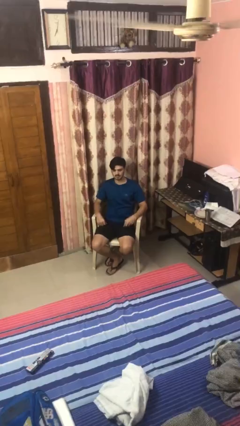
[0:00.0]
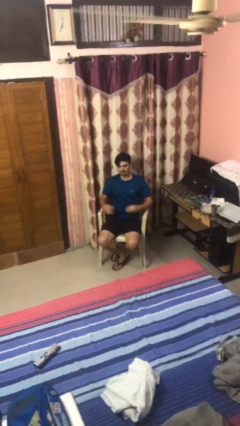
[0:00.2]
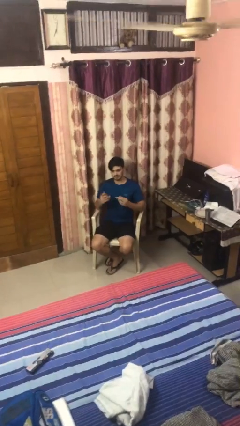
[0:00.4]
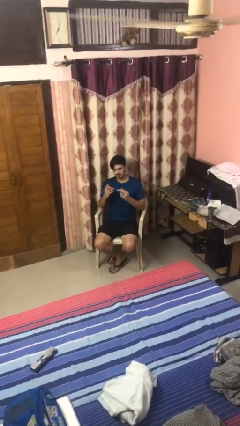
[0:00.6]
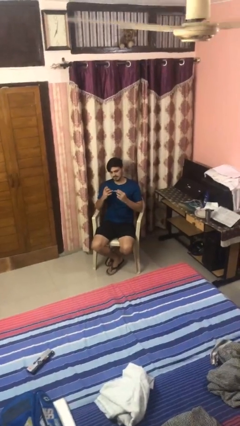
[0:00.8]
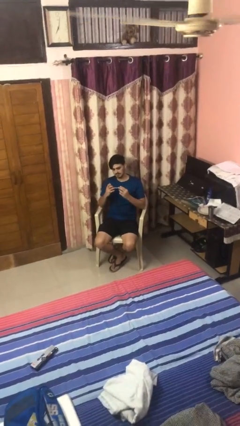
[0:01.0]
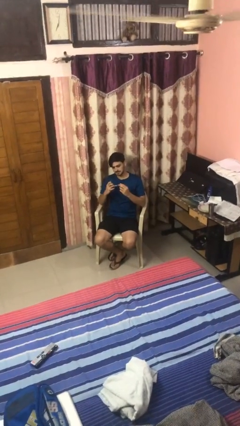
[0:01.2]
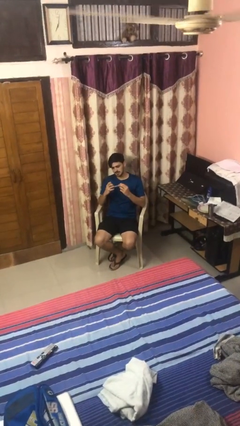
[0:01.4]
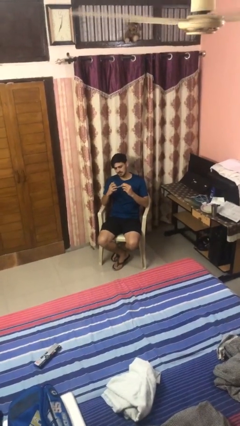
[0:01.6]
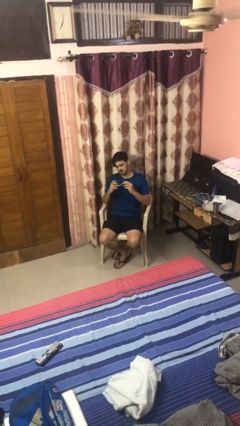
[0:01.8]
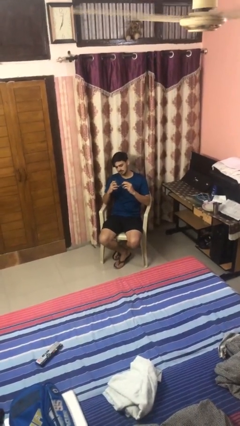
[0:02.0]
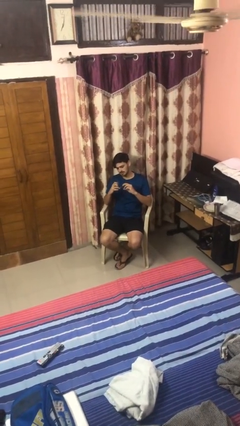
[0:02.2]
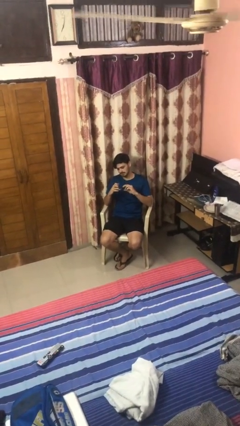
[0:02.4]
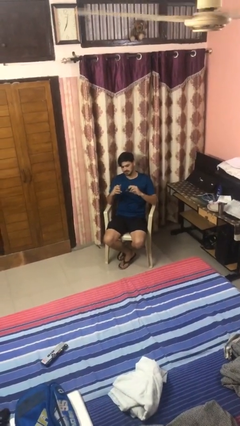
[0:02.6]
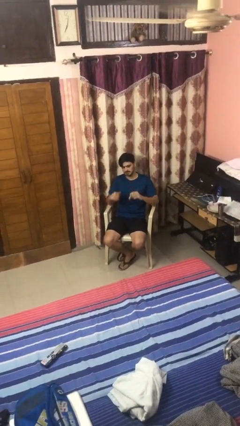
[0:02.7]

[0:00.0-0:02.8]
person clips fingernails

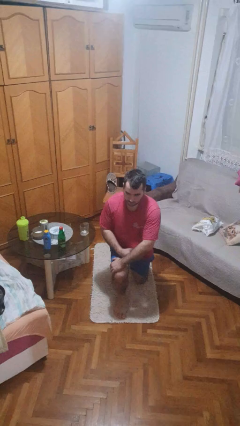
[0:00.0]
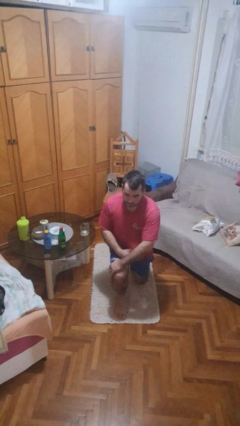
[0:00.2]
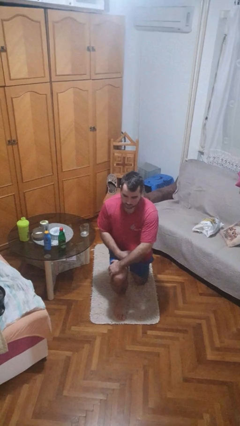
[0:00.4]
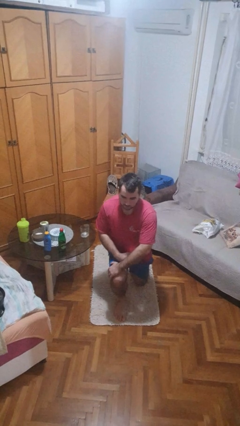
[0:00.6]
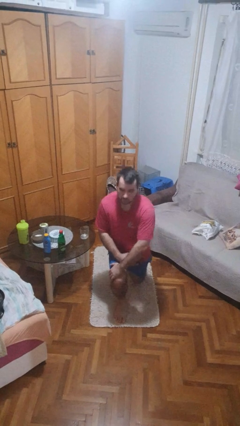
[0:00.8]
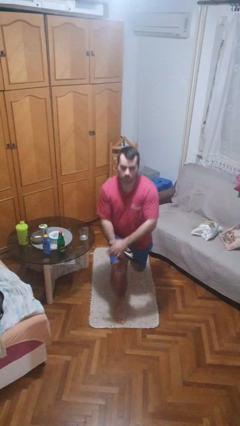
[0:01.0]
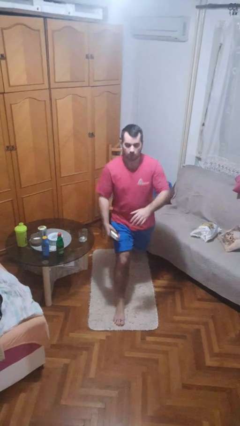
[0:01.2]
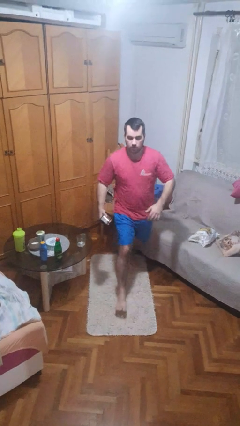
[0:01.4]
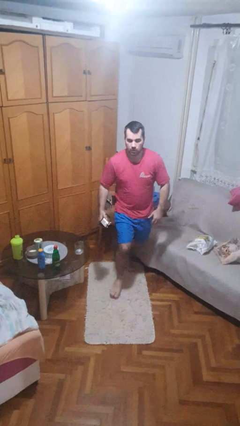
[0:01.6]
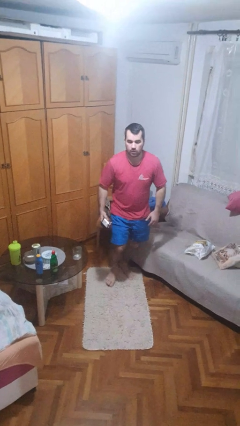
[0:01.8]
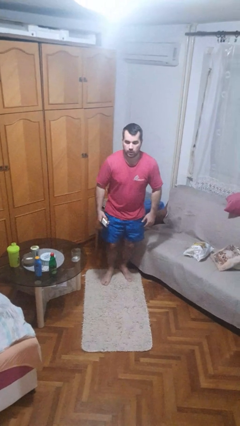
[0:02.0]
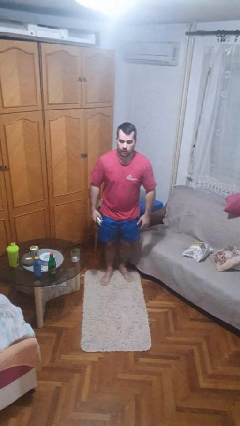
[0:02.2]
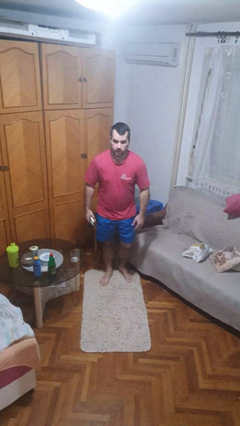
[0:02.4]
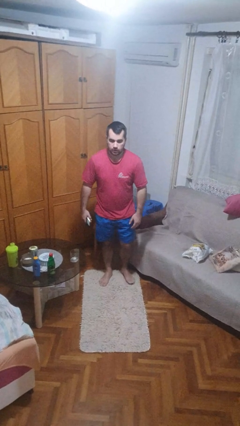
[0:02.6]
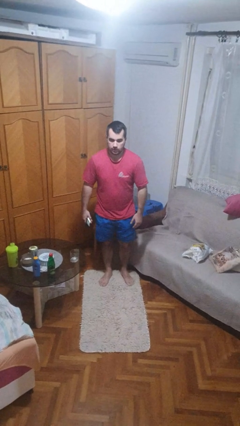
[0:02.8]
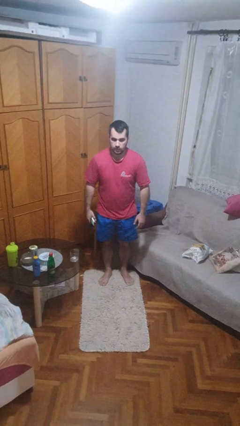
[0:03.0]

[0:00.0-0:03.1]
person stands up from floor

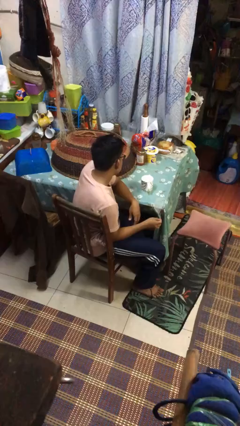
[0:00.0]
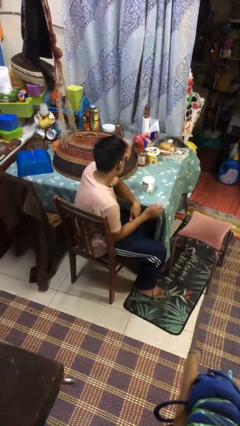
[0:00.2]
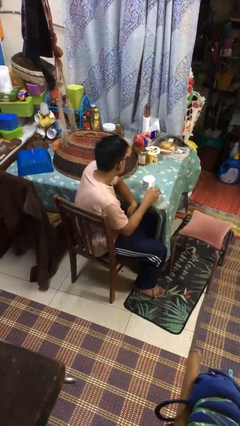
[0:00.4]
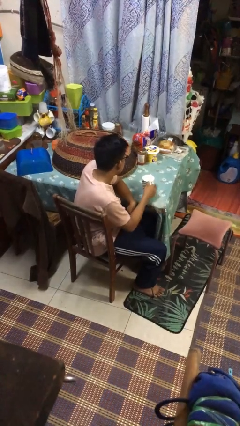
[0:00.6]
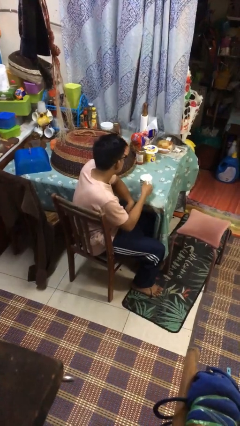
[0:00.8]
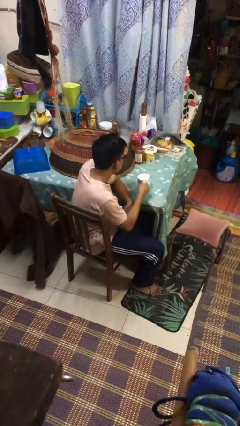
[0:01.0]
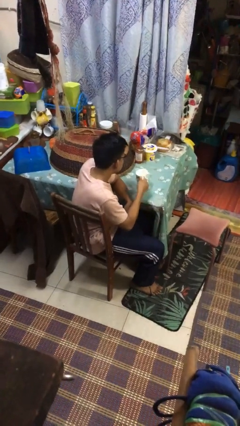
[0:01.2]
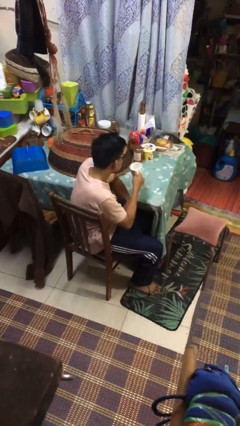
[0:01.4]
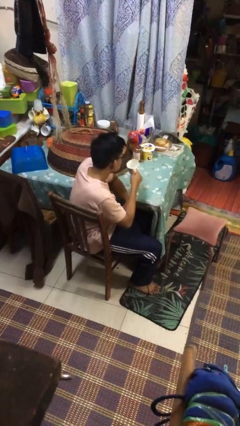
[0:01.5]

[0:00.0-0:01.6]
person picks up object from table

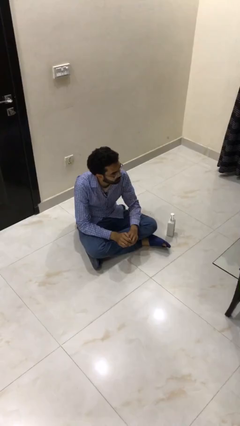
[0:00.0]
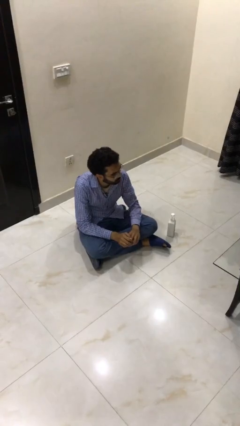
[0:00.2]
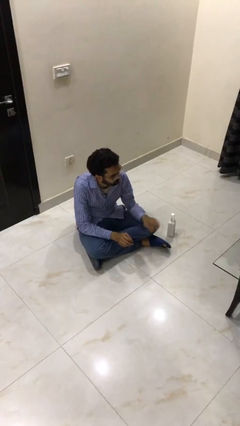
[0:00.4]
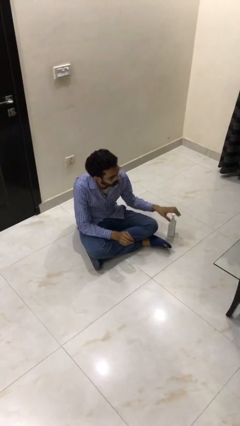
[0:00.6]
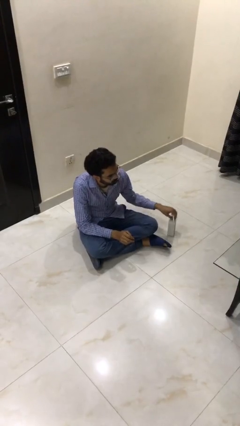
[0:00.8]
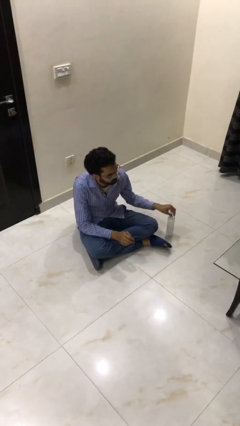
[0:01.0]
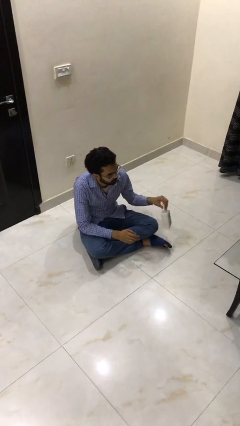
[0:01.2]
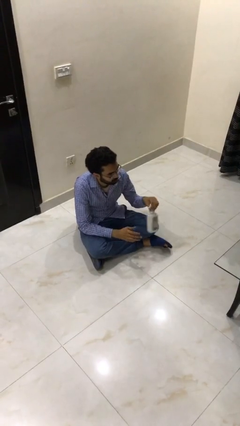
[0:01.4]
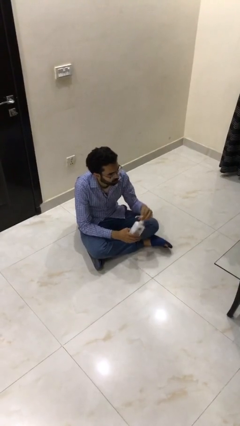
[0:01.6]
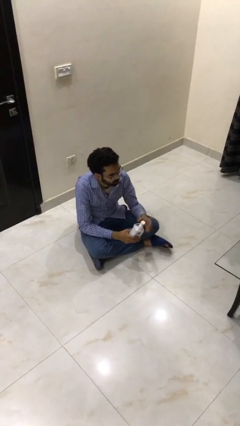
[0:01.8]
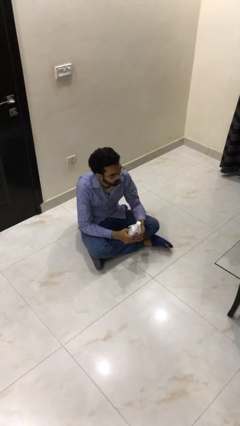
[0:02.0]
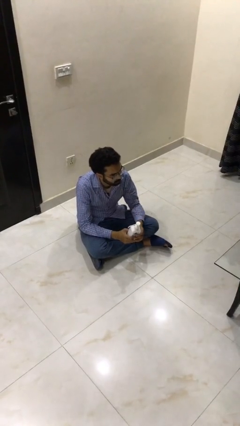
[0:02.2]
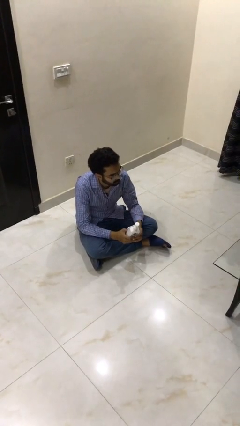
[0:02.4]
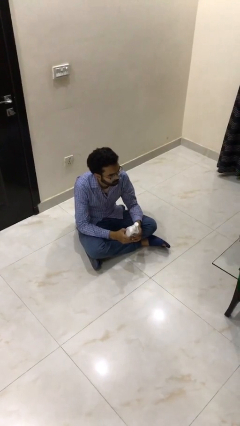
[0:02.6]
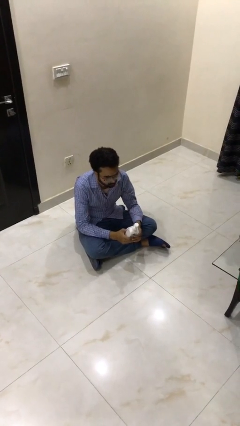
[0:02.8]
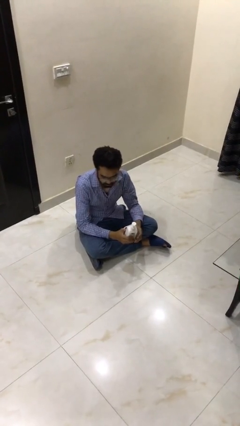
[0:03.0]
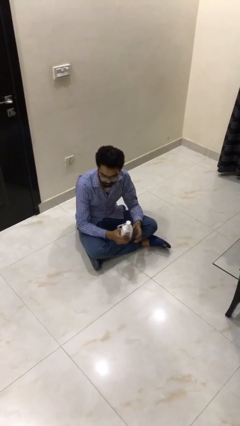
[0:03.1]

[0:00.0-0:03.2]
person picks up object from floor

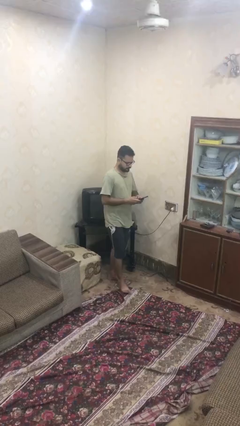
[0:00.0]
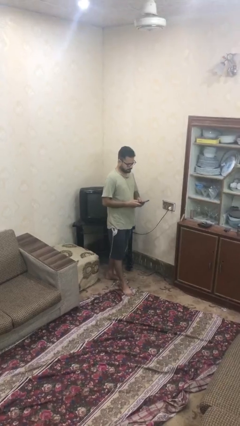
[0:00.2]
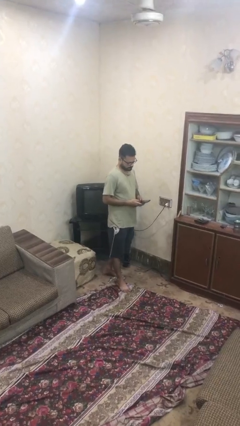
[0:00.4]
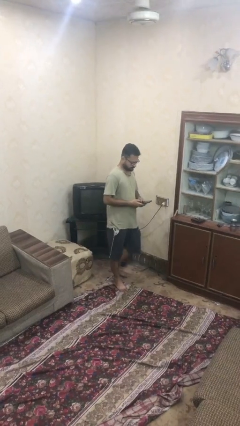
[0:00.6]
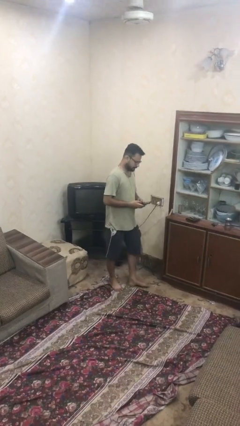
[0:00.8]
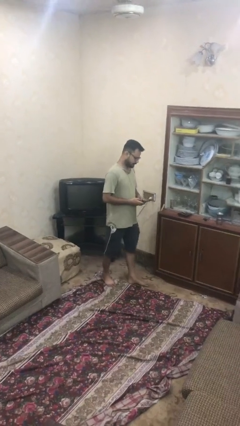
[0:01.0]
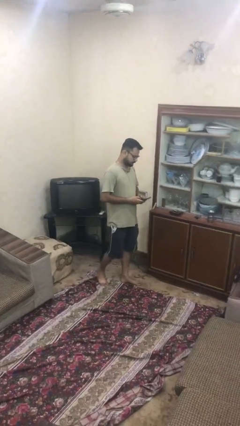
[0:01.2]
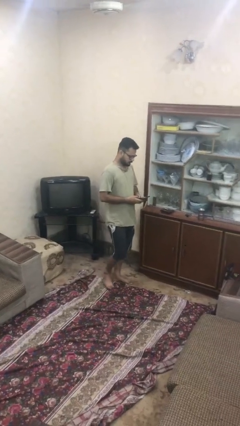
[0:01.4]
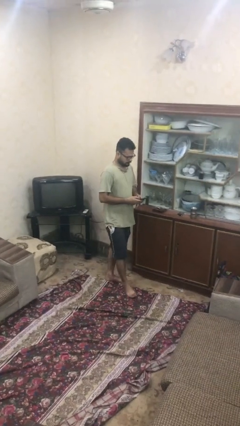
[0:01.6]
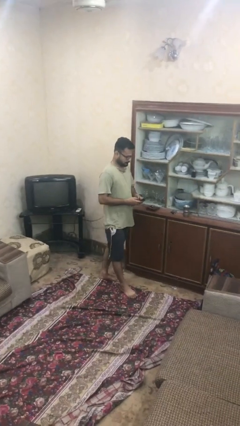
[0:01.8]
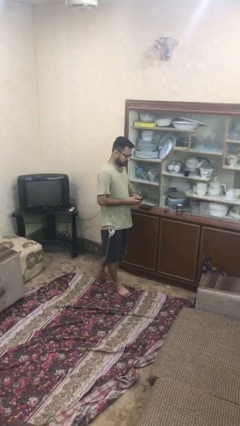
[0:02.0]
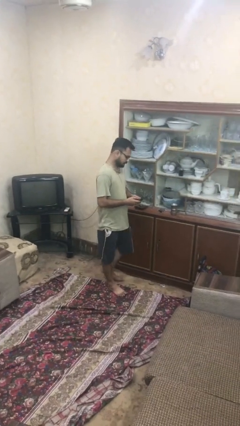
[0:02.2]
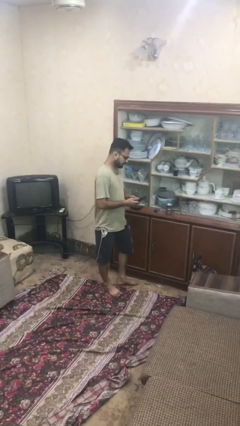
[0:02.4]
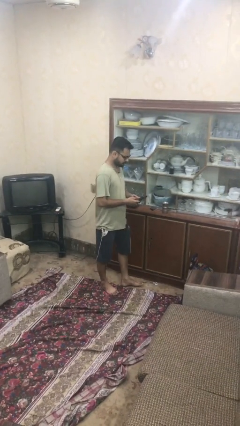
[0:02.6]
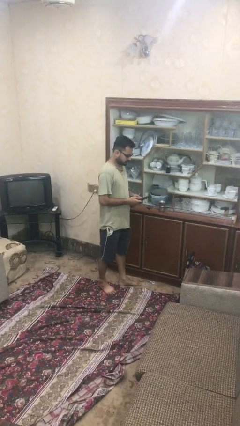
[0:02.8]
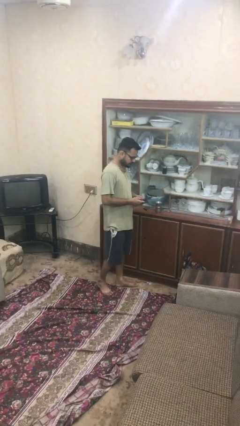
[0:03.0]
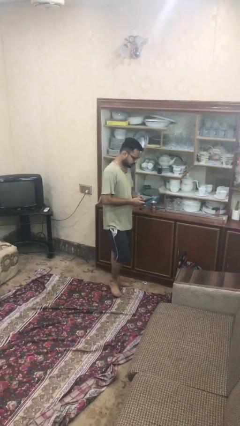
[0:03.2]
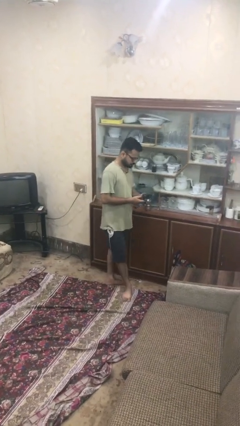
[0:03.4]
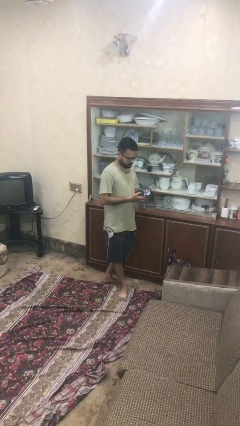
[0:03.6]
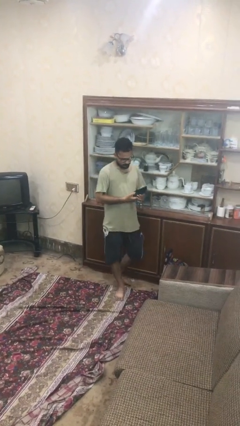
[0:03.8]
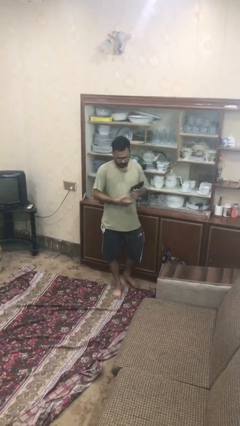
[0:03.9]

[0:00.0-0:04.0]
person texts on phone

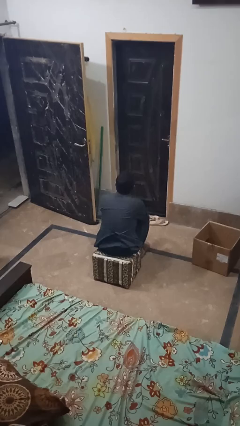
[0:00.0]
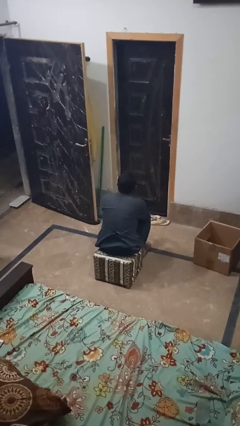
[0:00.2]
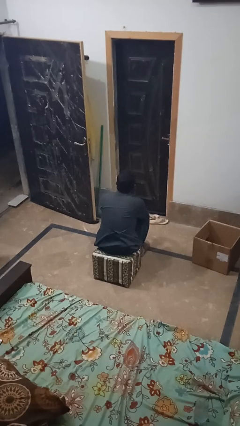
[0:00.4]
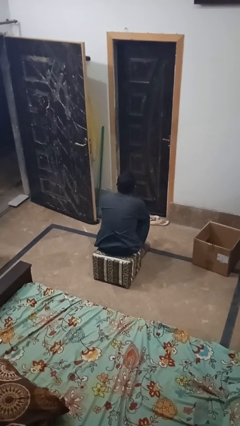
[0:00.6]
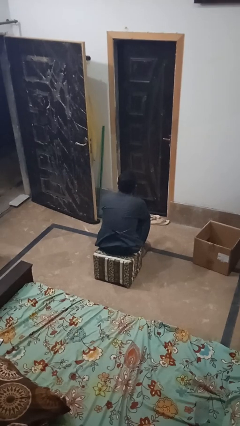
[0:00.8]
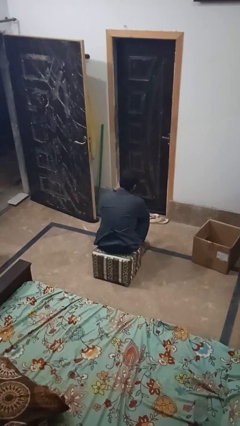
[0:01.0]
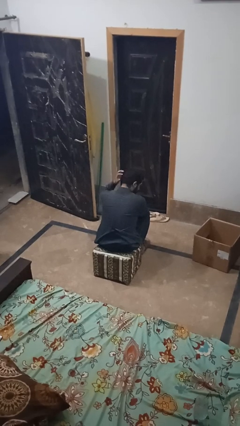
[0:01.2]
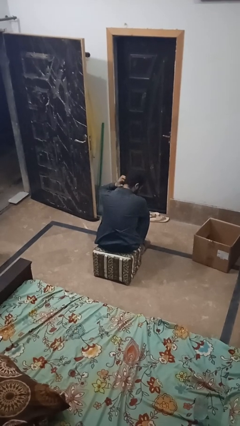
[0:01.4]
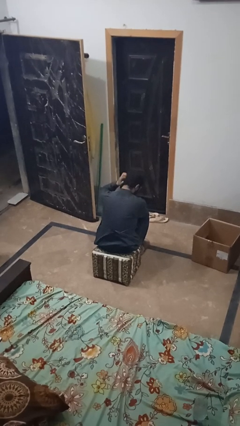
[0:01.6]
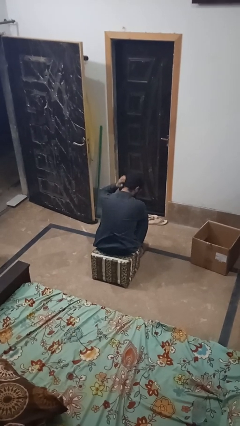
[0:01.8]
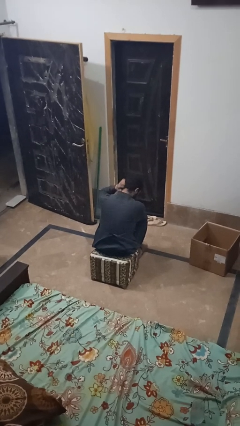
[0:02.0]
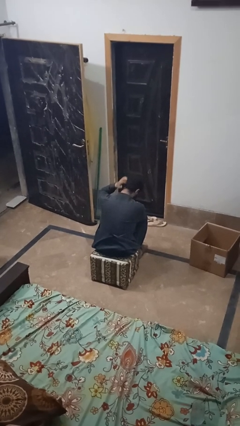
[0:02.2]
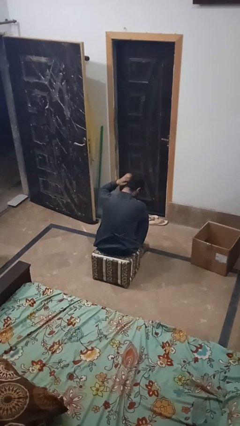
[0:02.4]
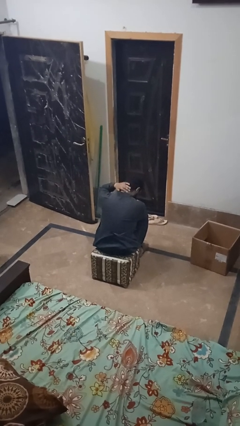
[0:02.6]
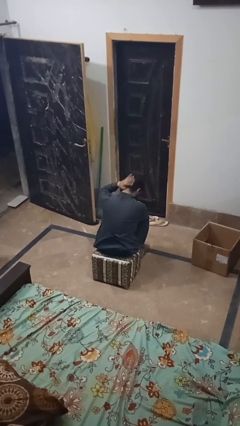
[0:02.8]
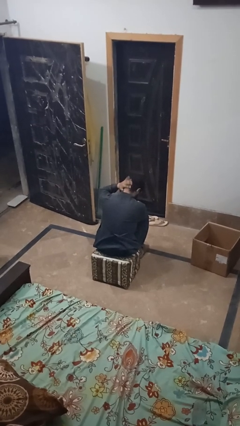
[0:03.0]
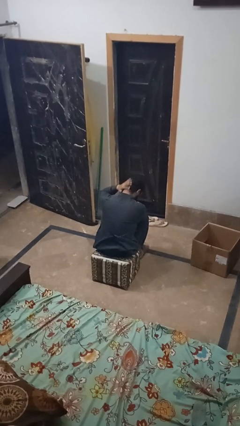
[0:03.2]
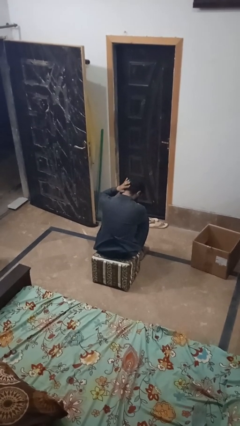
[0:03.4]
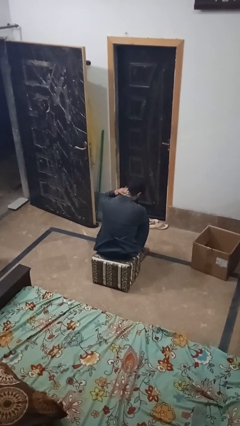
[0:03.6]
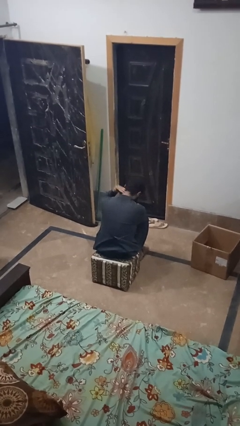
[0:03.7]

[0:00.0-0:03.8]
person strokes hair
